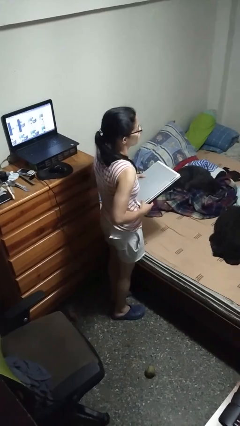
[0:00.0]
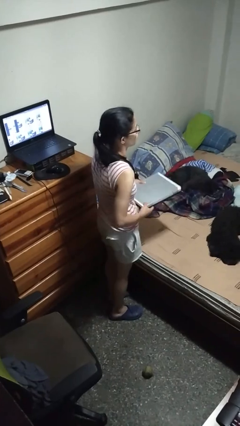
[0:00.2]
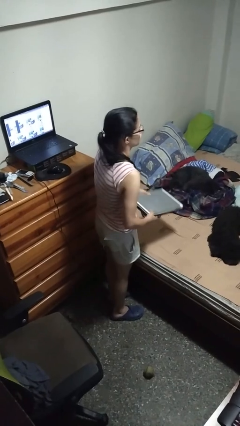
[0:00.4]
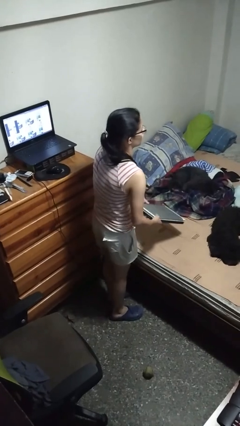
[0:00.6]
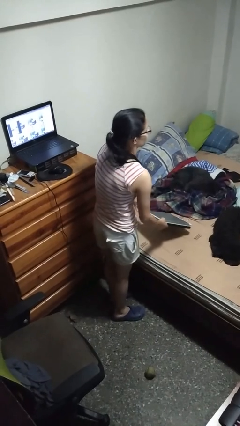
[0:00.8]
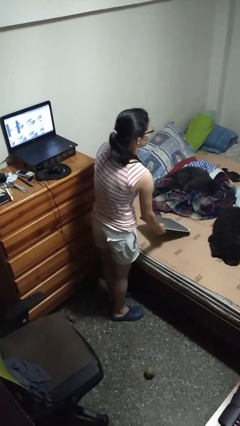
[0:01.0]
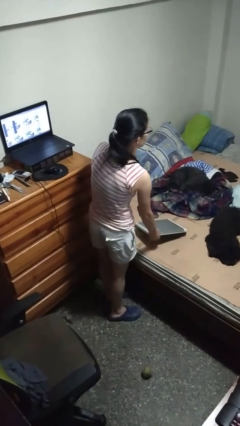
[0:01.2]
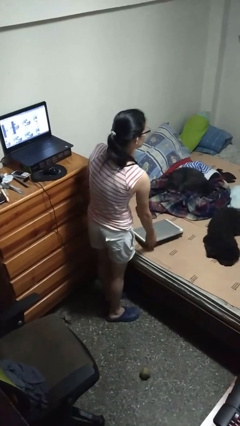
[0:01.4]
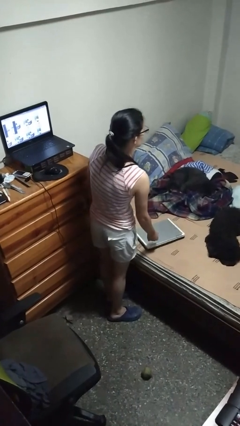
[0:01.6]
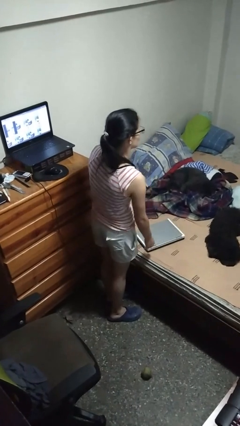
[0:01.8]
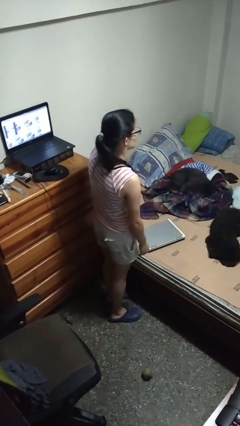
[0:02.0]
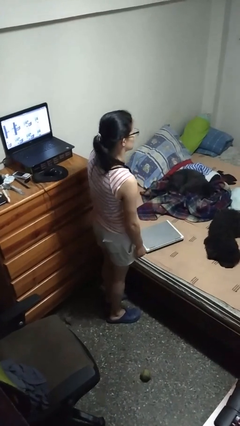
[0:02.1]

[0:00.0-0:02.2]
person puts down object on bed

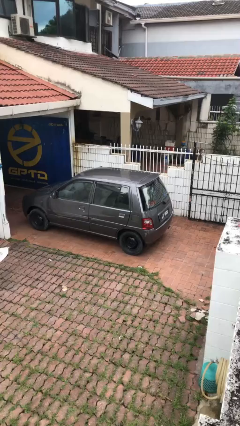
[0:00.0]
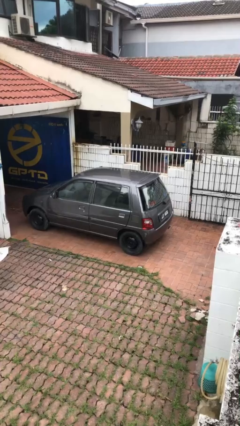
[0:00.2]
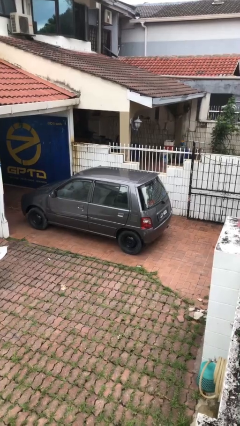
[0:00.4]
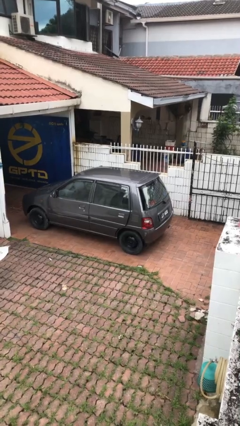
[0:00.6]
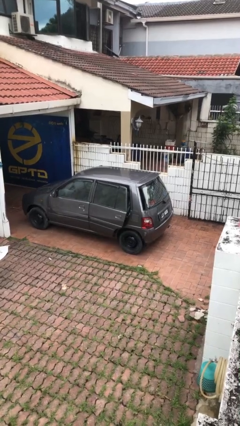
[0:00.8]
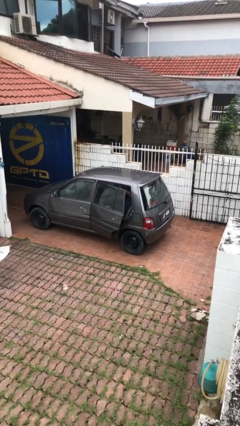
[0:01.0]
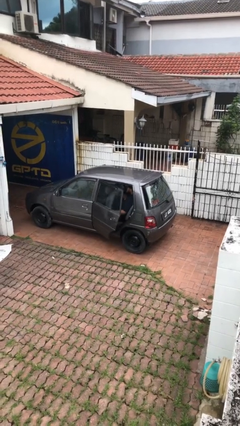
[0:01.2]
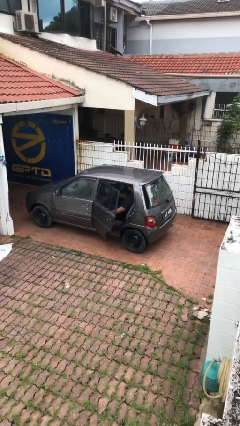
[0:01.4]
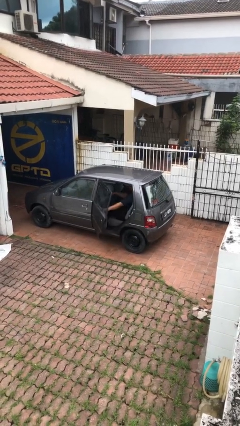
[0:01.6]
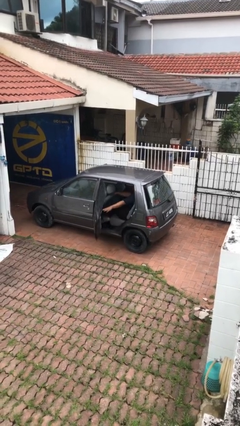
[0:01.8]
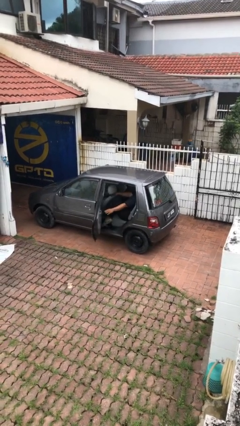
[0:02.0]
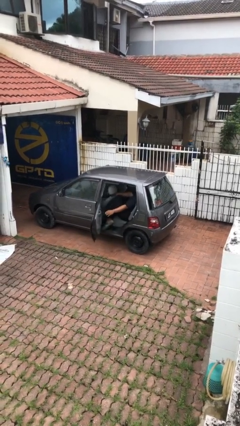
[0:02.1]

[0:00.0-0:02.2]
person opens car door

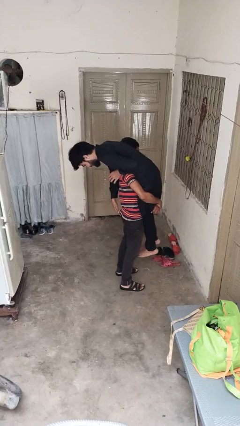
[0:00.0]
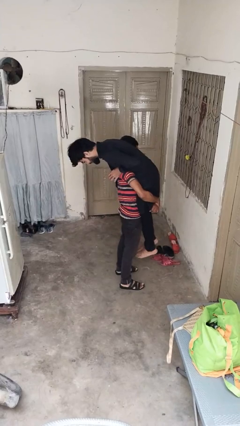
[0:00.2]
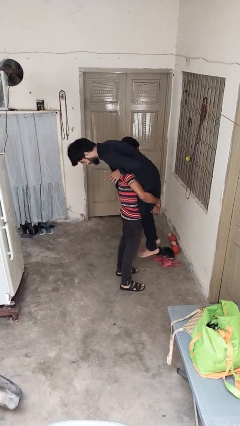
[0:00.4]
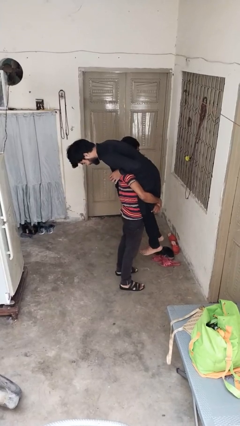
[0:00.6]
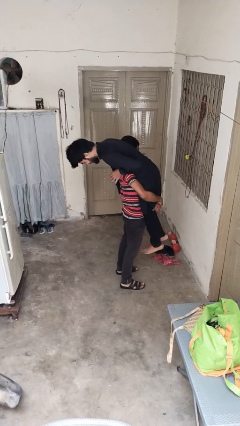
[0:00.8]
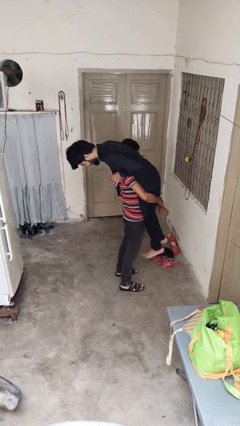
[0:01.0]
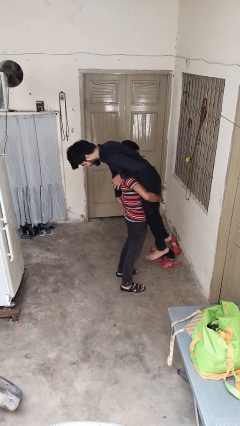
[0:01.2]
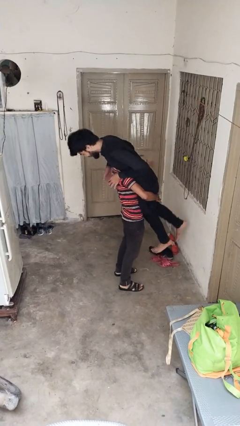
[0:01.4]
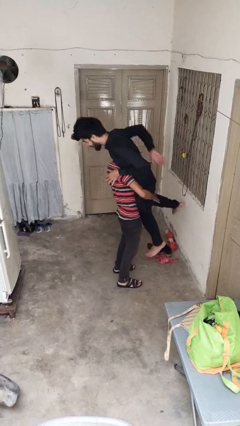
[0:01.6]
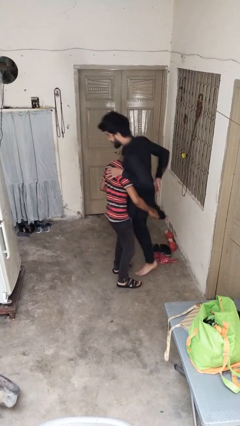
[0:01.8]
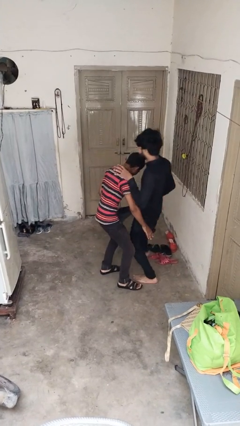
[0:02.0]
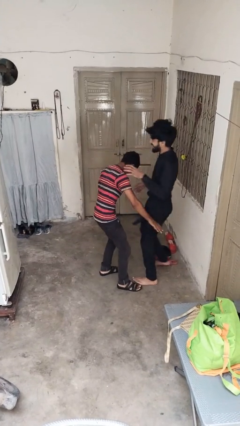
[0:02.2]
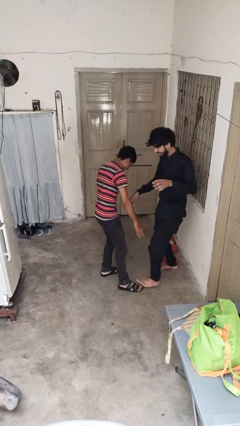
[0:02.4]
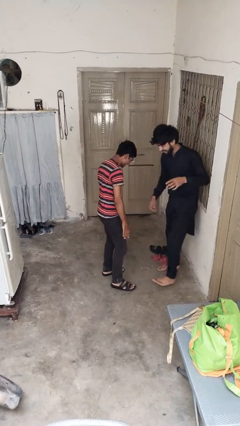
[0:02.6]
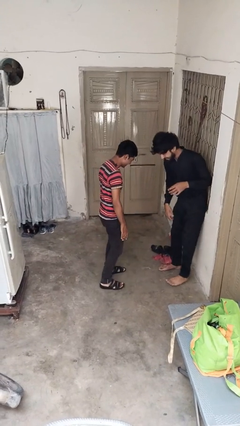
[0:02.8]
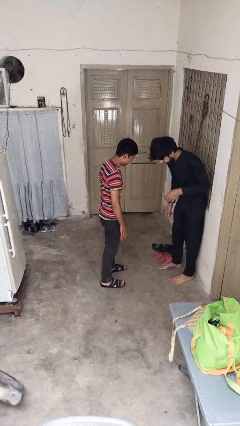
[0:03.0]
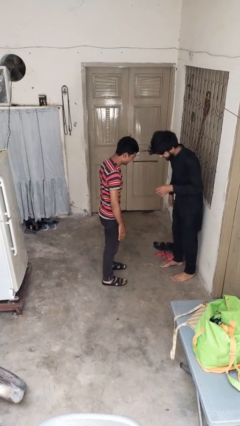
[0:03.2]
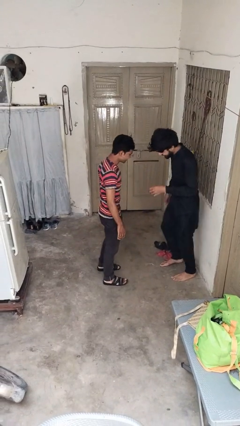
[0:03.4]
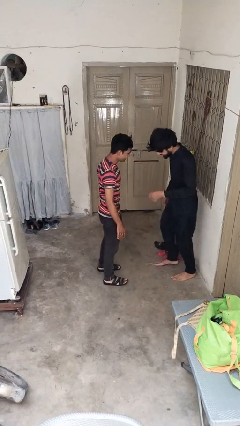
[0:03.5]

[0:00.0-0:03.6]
person puts down person

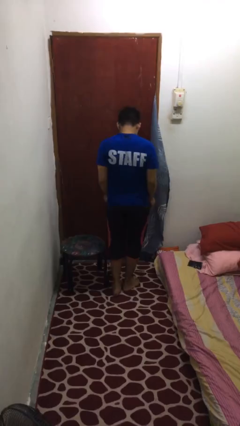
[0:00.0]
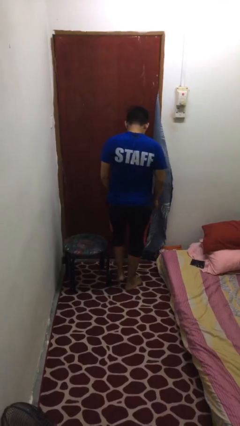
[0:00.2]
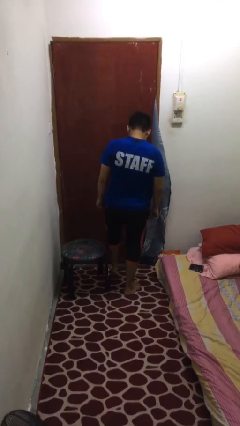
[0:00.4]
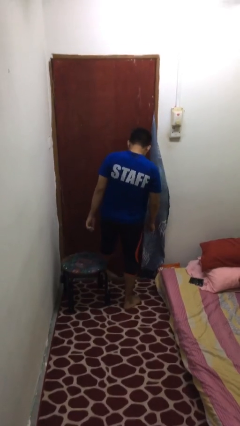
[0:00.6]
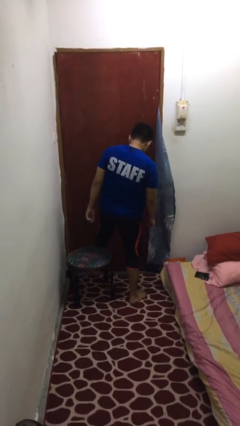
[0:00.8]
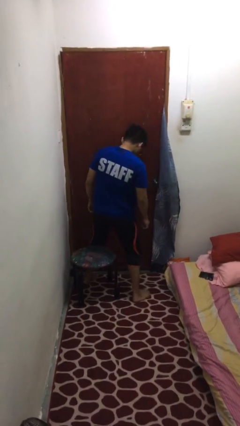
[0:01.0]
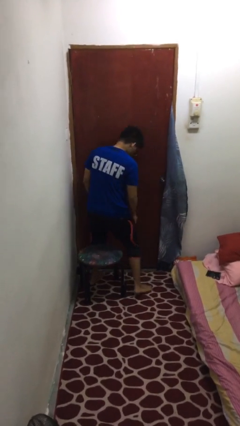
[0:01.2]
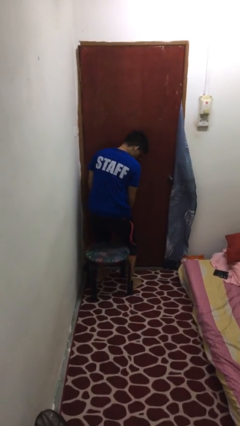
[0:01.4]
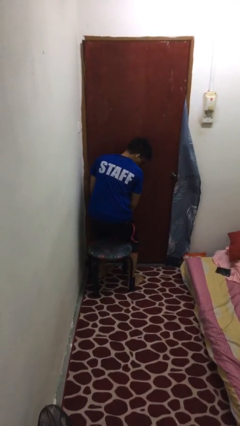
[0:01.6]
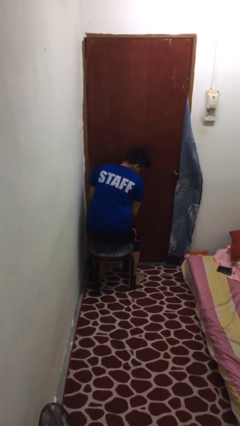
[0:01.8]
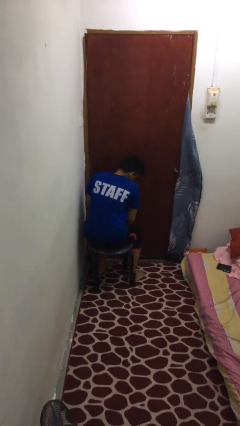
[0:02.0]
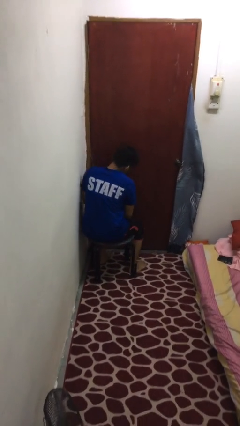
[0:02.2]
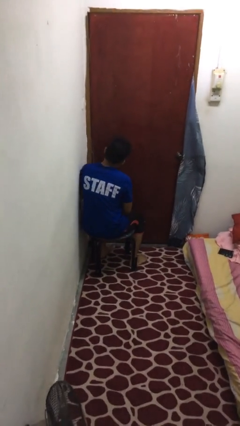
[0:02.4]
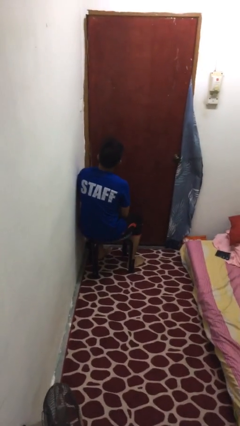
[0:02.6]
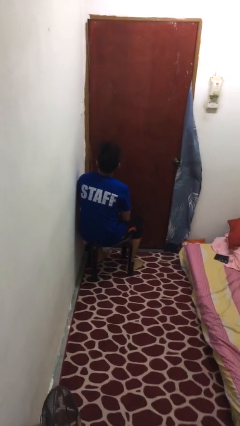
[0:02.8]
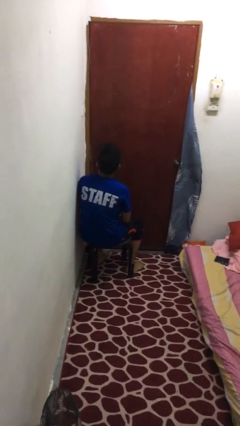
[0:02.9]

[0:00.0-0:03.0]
person sits down

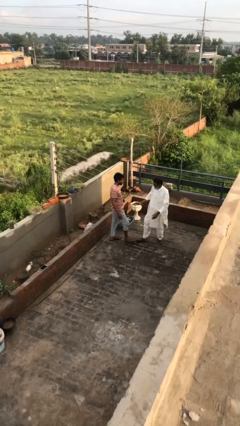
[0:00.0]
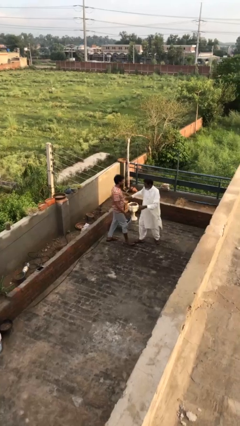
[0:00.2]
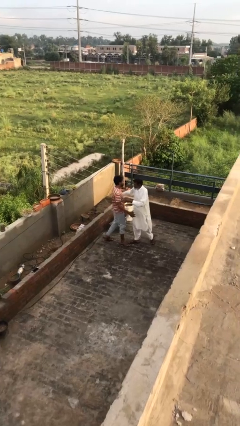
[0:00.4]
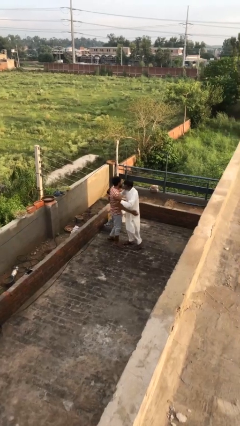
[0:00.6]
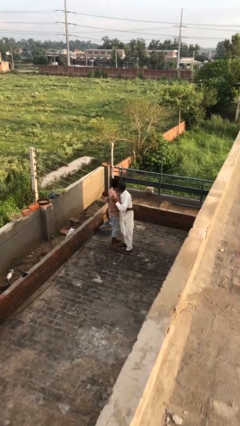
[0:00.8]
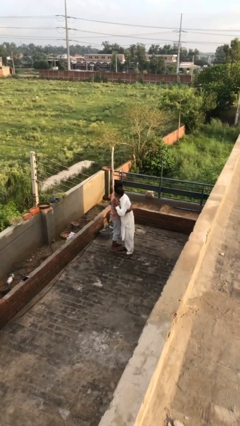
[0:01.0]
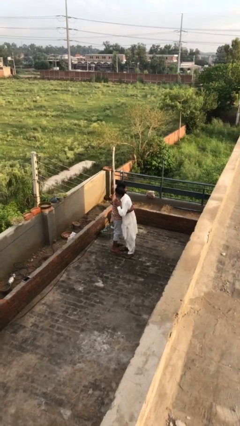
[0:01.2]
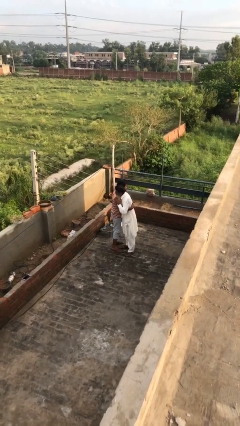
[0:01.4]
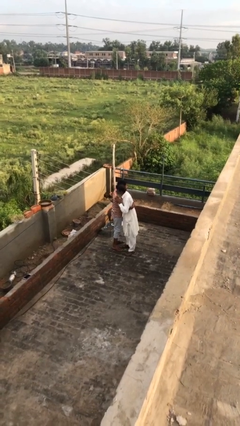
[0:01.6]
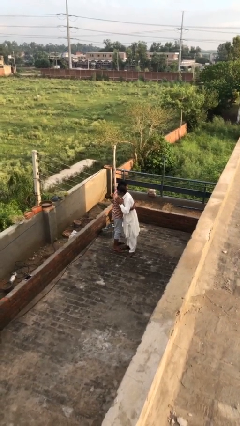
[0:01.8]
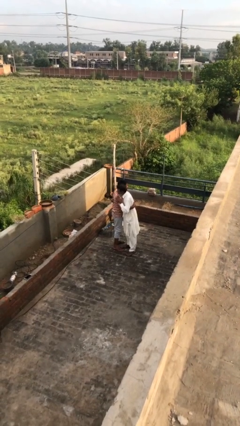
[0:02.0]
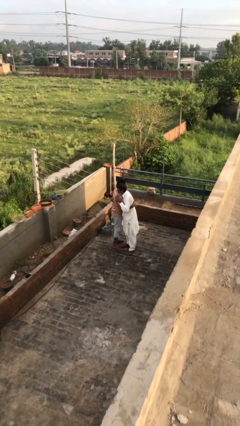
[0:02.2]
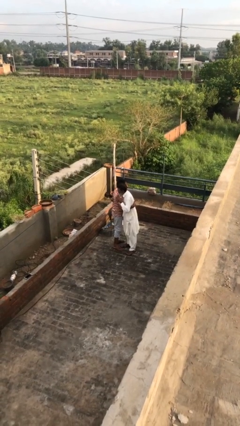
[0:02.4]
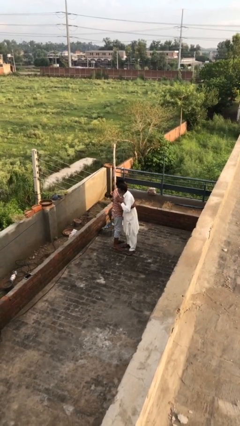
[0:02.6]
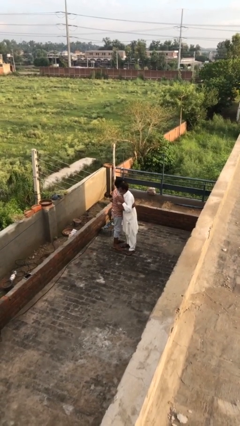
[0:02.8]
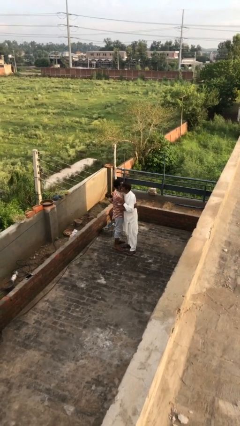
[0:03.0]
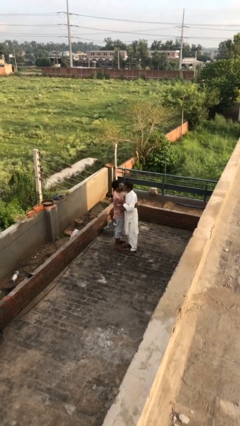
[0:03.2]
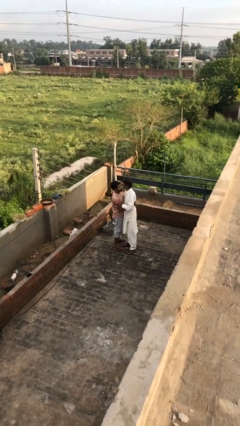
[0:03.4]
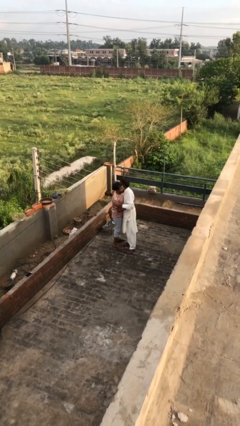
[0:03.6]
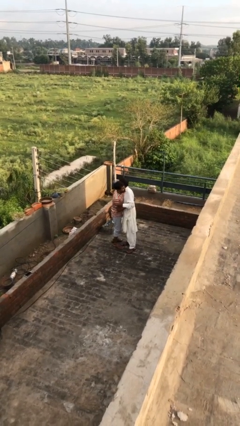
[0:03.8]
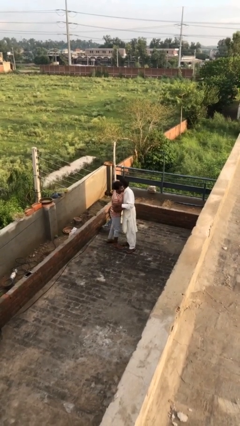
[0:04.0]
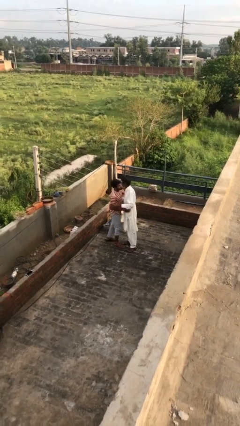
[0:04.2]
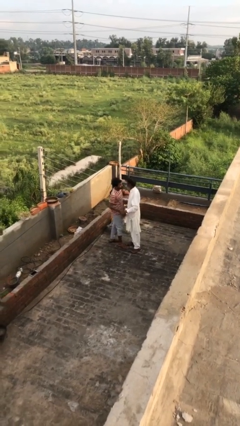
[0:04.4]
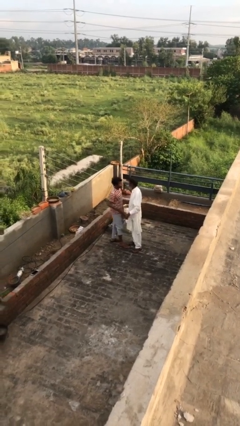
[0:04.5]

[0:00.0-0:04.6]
person embraces person

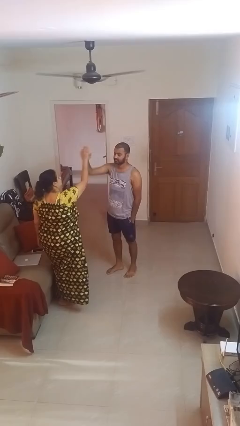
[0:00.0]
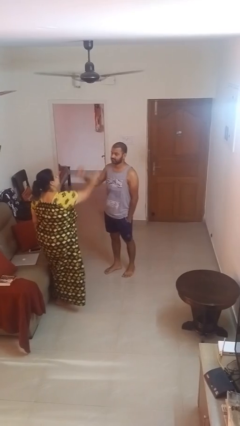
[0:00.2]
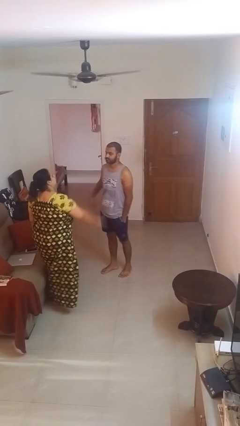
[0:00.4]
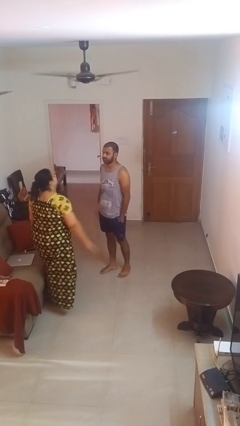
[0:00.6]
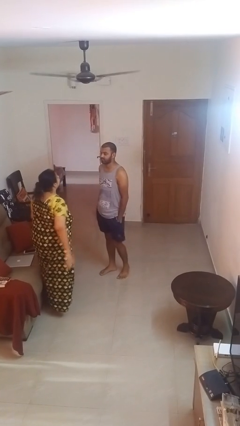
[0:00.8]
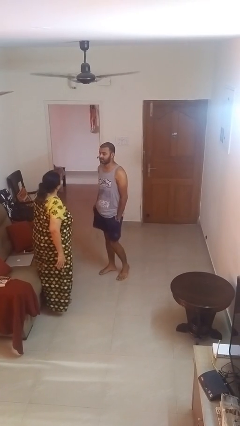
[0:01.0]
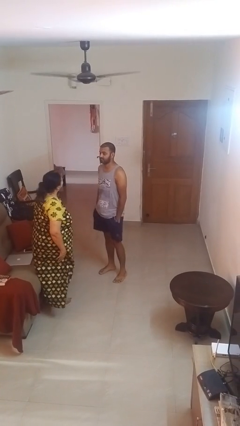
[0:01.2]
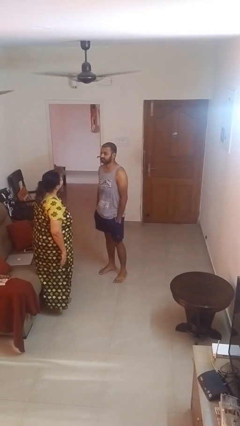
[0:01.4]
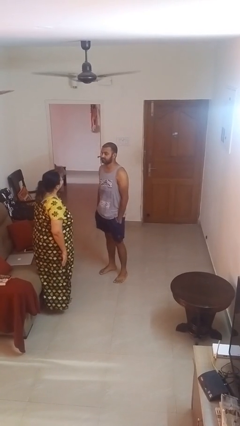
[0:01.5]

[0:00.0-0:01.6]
person highfives hand
